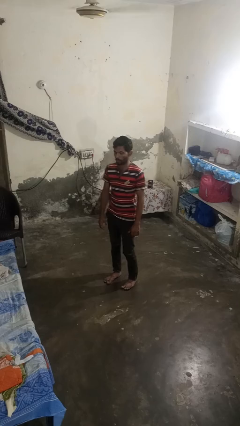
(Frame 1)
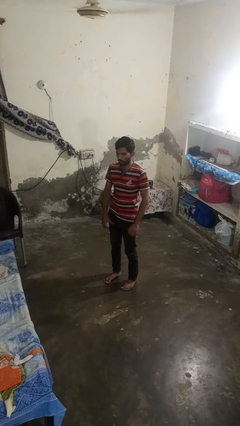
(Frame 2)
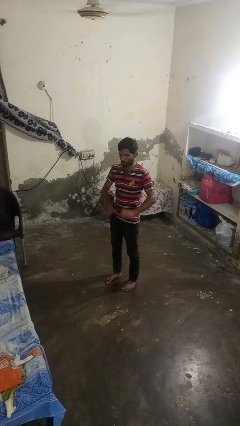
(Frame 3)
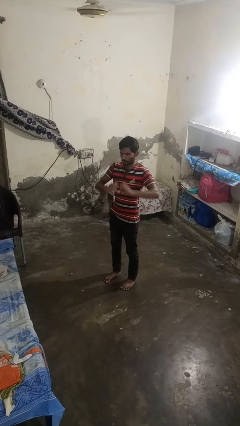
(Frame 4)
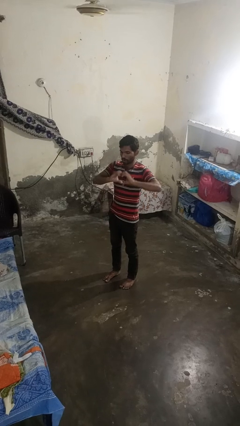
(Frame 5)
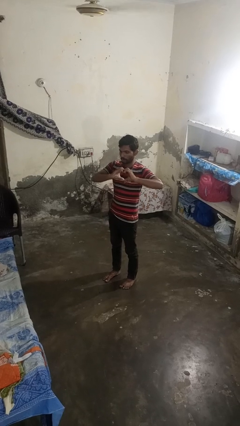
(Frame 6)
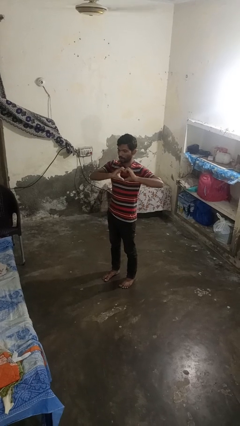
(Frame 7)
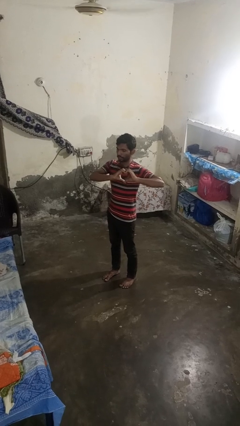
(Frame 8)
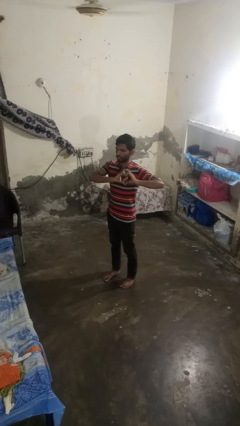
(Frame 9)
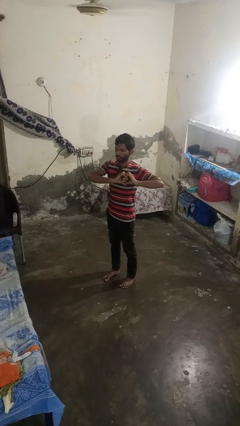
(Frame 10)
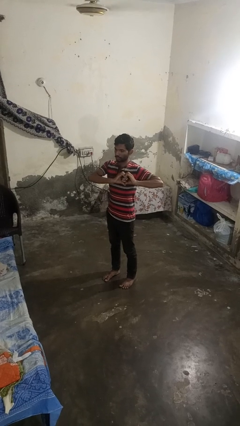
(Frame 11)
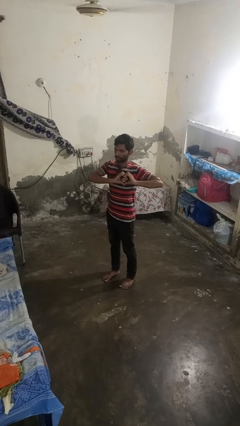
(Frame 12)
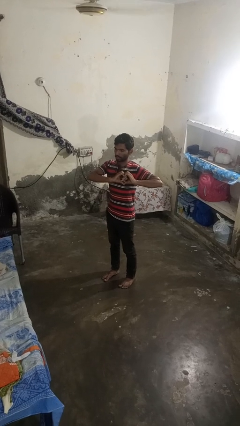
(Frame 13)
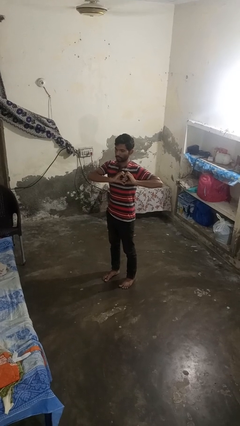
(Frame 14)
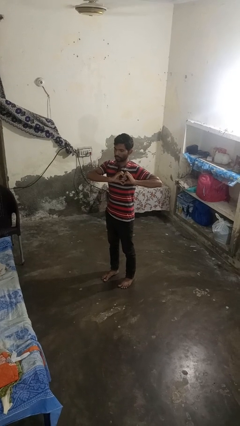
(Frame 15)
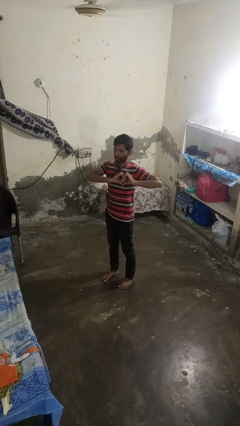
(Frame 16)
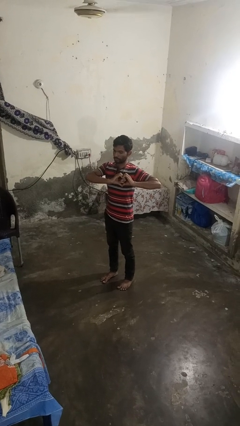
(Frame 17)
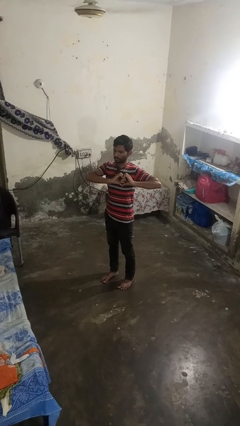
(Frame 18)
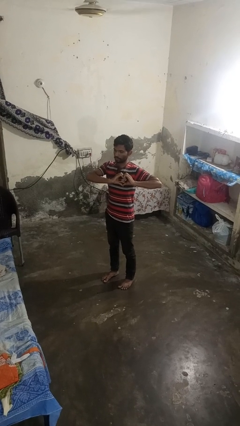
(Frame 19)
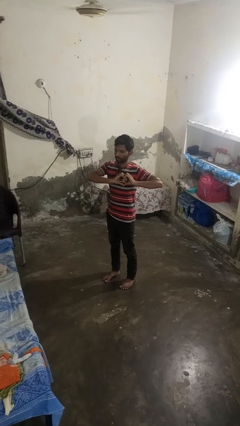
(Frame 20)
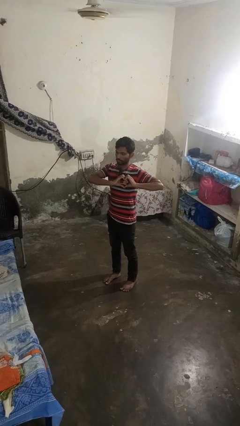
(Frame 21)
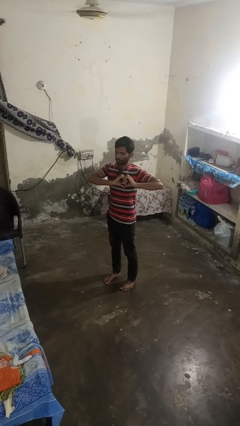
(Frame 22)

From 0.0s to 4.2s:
person gestures heart

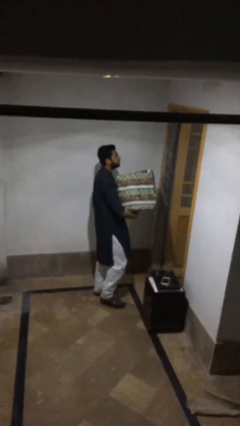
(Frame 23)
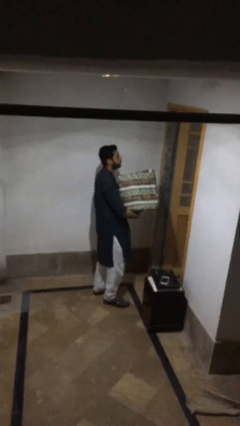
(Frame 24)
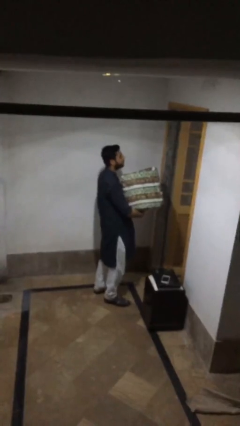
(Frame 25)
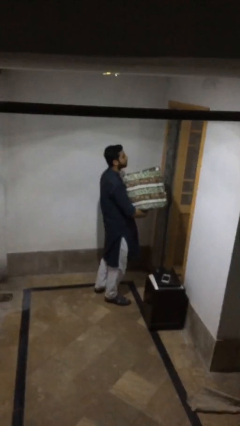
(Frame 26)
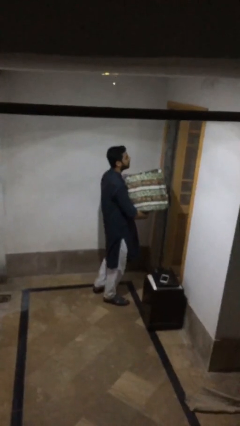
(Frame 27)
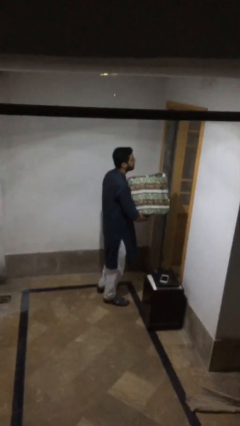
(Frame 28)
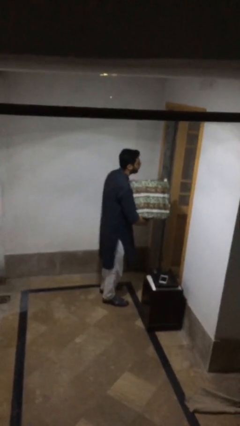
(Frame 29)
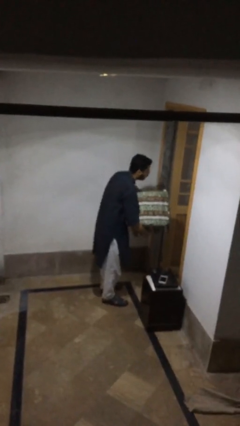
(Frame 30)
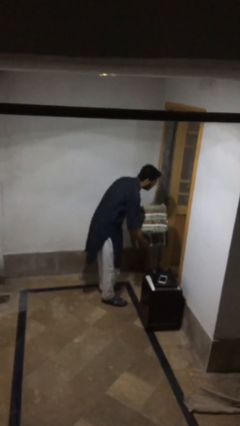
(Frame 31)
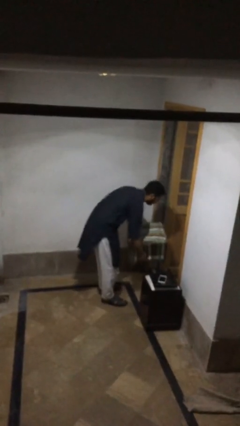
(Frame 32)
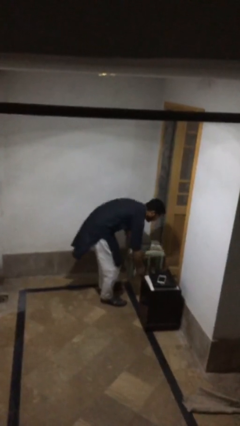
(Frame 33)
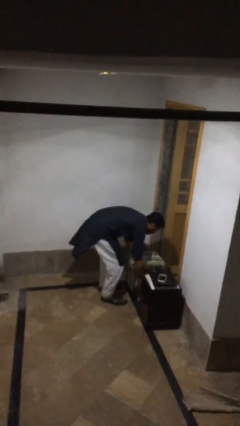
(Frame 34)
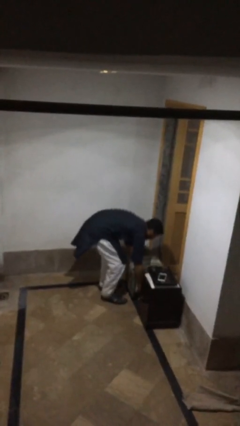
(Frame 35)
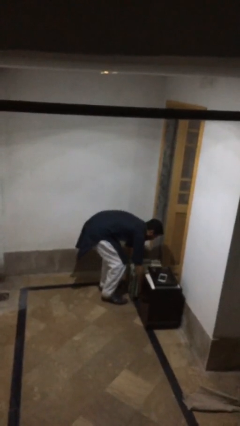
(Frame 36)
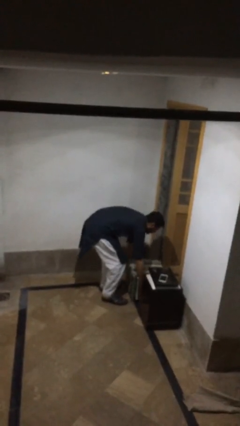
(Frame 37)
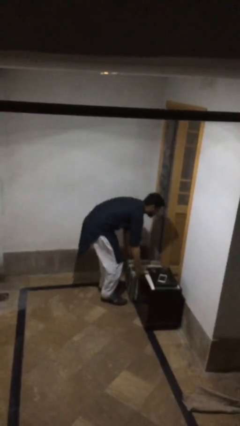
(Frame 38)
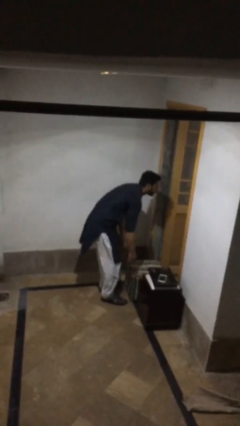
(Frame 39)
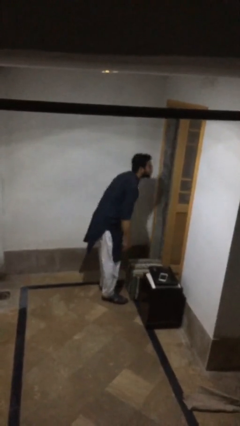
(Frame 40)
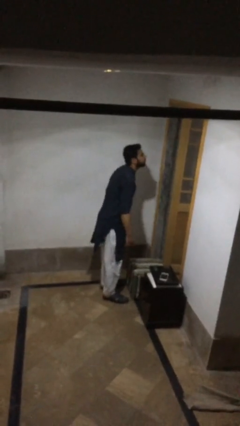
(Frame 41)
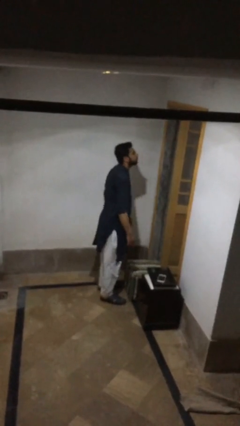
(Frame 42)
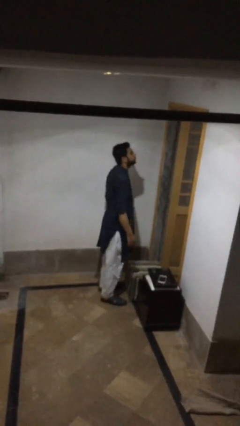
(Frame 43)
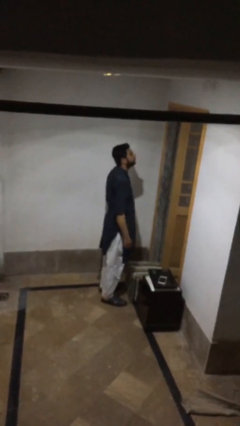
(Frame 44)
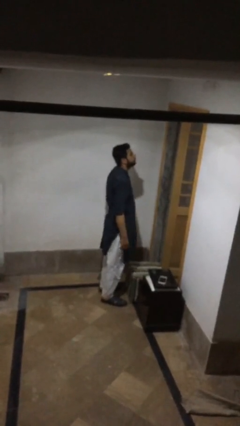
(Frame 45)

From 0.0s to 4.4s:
person puts down object on floor

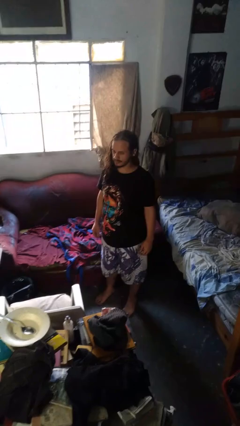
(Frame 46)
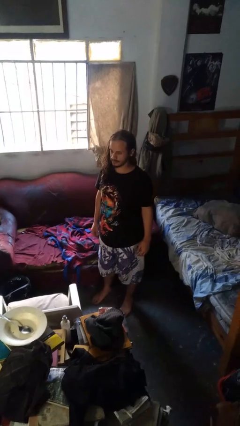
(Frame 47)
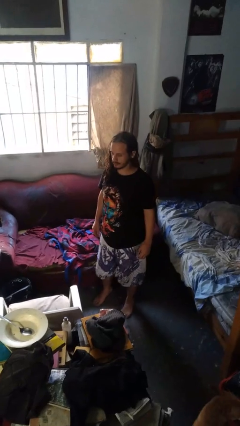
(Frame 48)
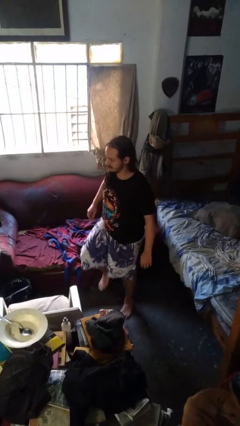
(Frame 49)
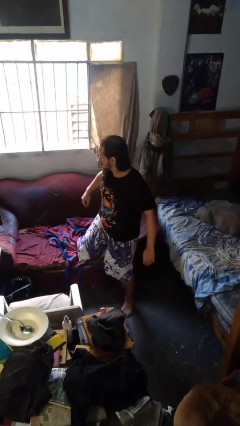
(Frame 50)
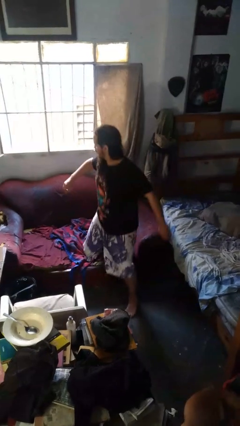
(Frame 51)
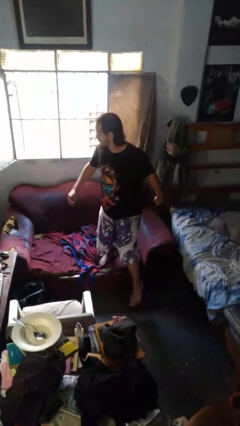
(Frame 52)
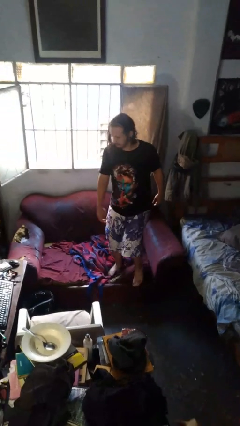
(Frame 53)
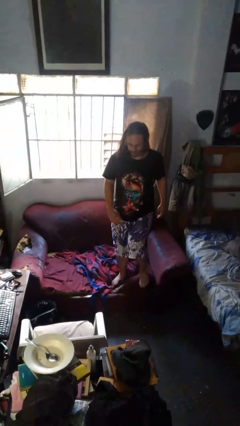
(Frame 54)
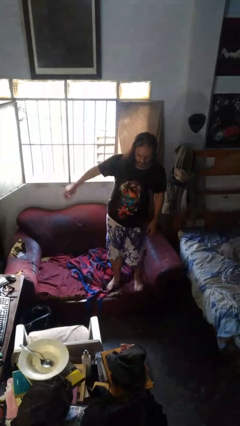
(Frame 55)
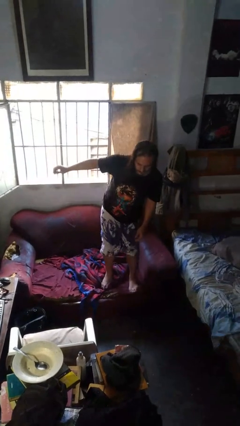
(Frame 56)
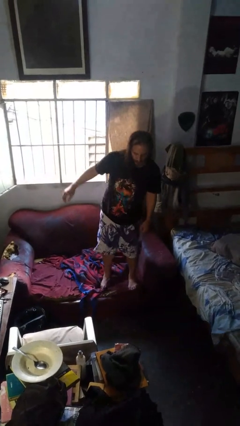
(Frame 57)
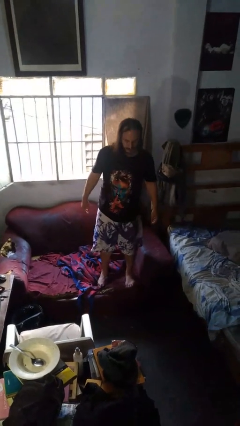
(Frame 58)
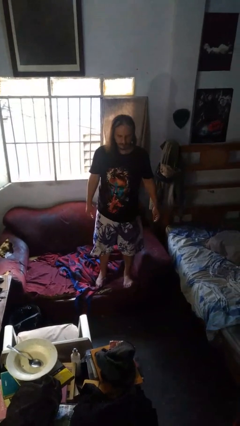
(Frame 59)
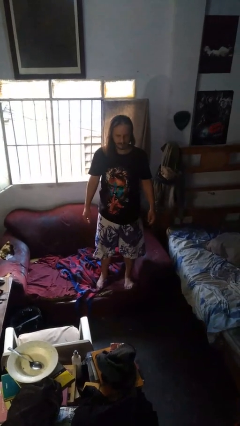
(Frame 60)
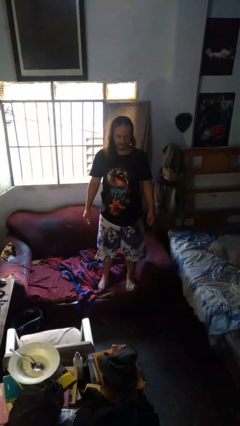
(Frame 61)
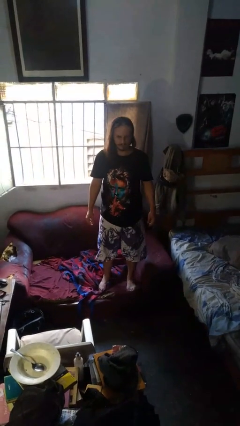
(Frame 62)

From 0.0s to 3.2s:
person climbs on couch

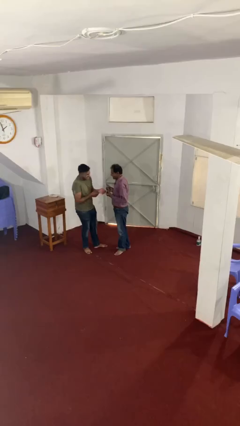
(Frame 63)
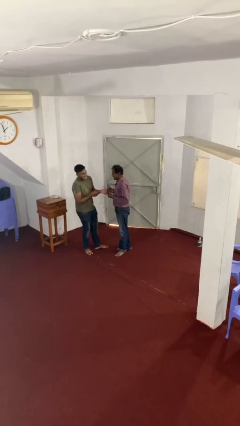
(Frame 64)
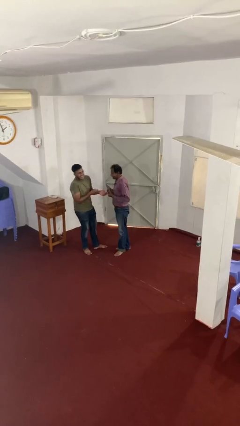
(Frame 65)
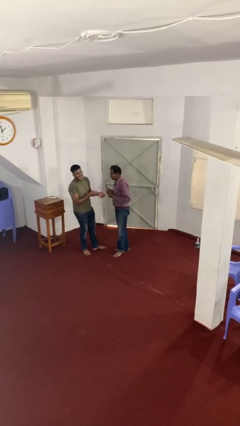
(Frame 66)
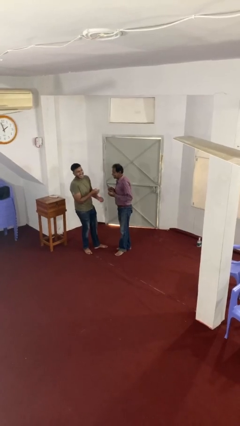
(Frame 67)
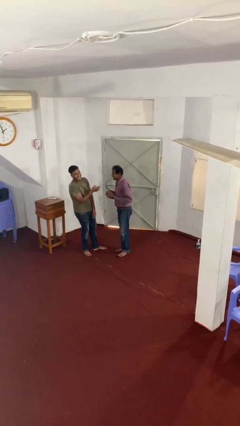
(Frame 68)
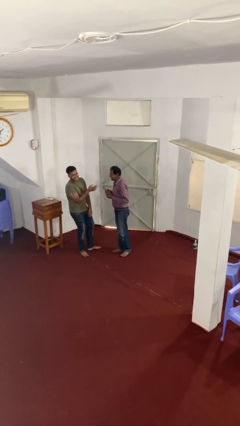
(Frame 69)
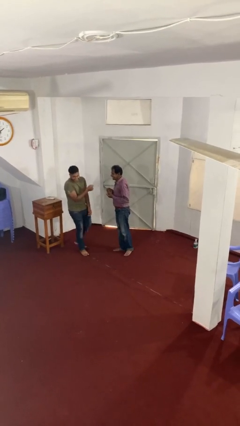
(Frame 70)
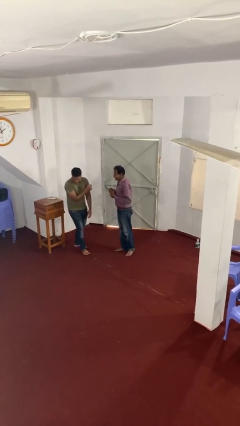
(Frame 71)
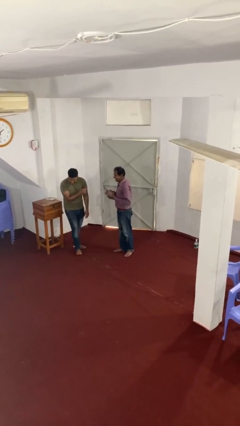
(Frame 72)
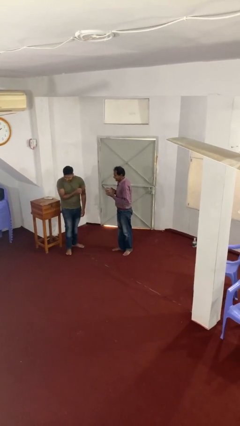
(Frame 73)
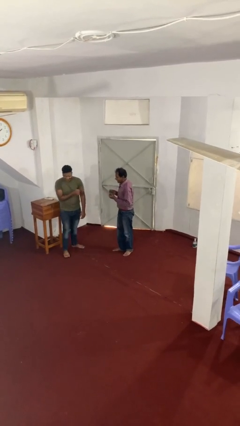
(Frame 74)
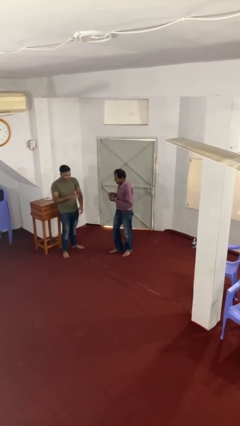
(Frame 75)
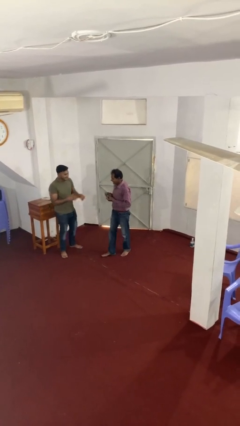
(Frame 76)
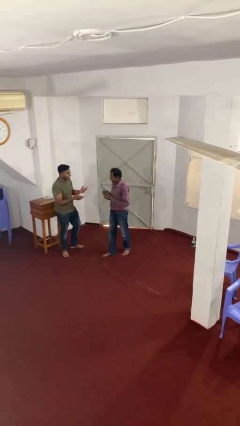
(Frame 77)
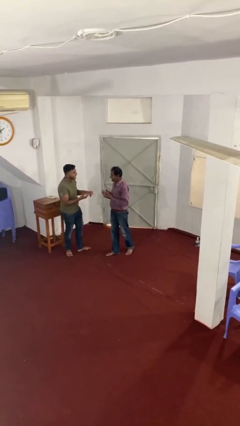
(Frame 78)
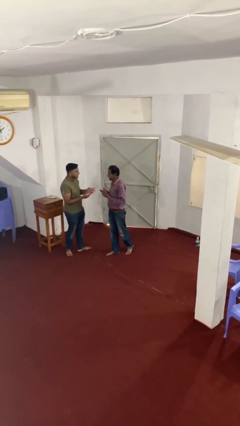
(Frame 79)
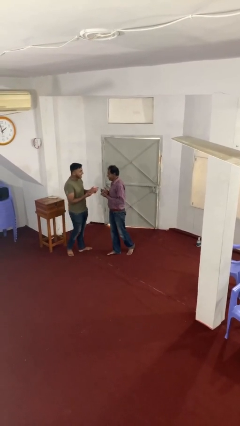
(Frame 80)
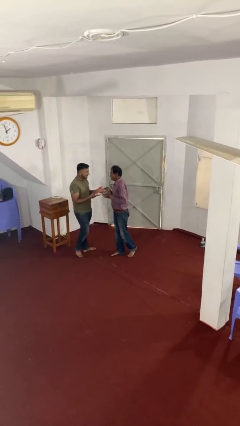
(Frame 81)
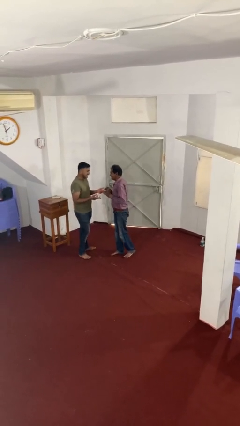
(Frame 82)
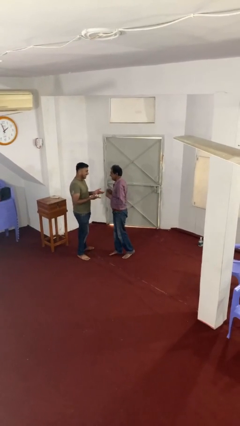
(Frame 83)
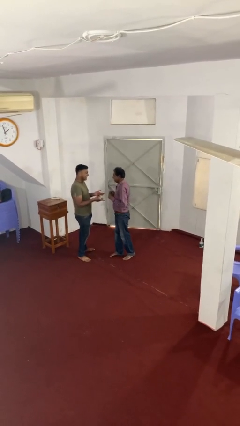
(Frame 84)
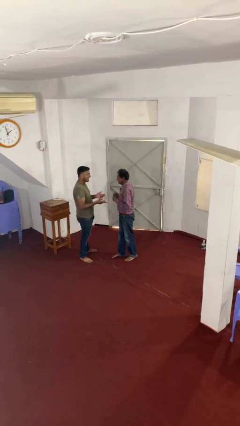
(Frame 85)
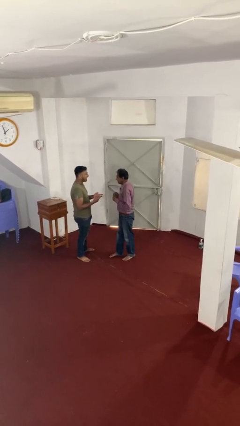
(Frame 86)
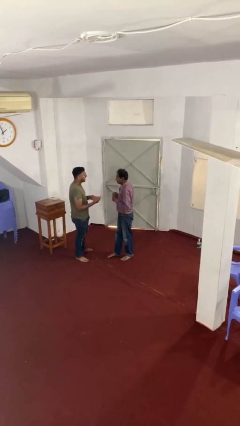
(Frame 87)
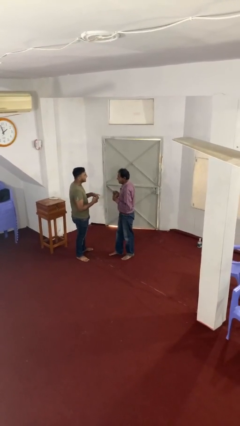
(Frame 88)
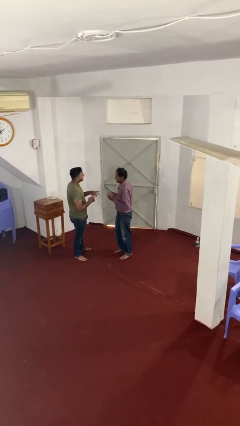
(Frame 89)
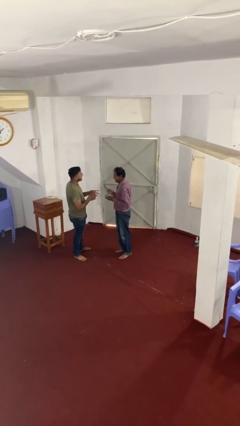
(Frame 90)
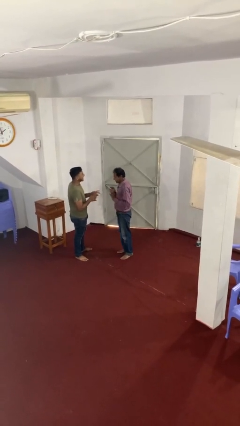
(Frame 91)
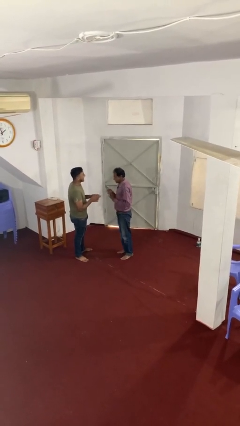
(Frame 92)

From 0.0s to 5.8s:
person talks to person
